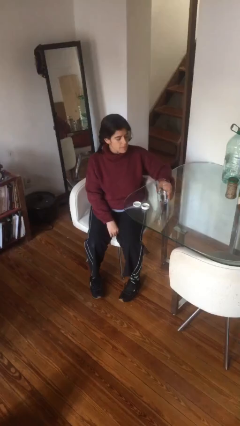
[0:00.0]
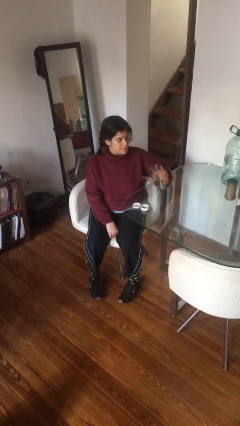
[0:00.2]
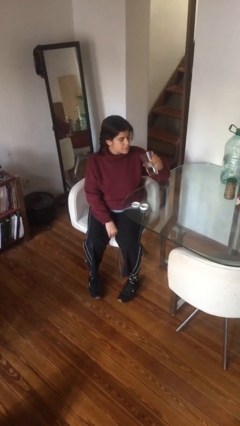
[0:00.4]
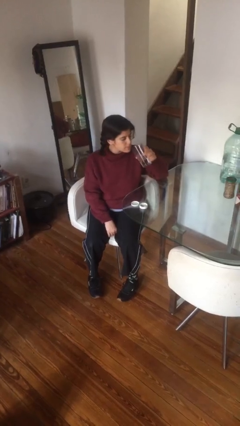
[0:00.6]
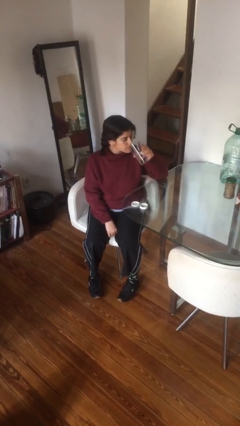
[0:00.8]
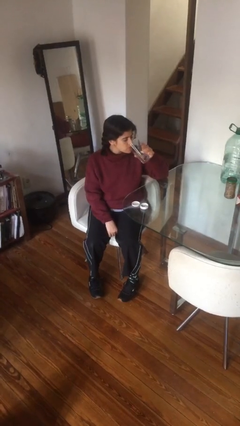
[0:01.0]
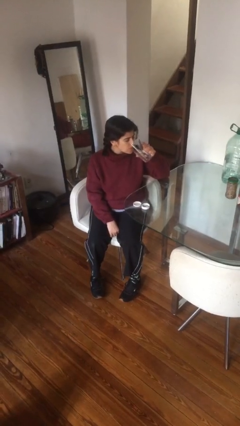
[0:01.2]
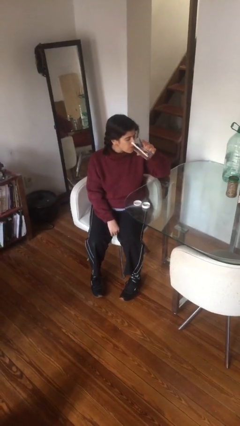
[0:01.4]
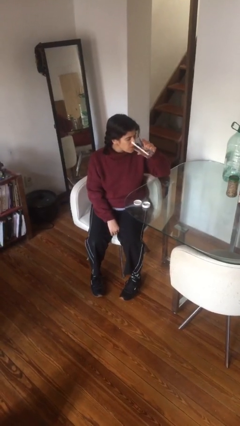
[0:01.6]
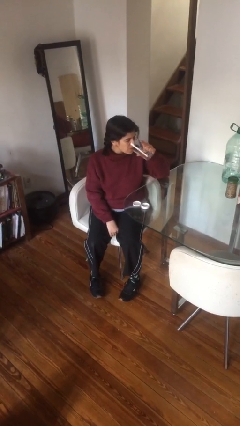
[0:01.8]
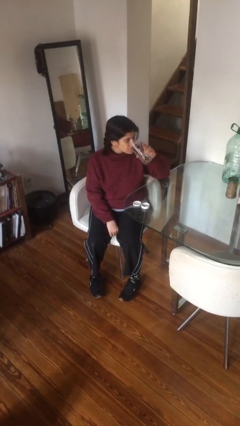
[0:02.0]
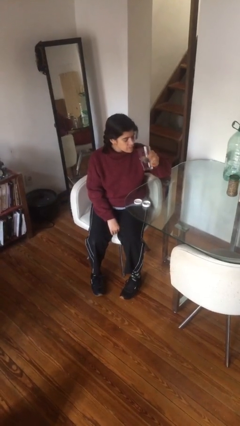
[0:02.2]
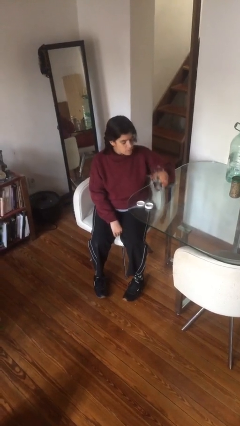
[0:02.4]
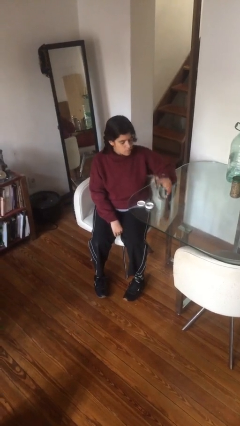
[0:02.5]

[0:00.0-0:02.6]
person drinks from cup

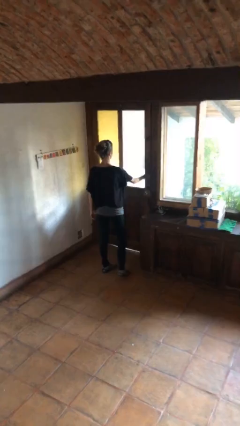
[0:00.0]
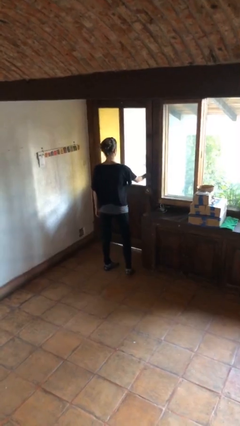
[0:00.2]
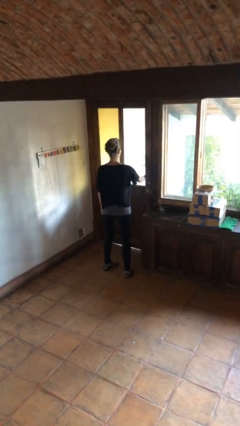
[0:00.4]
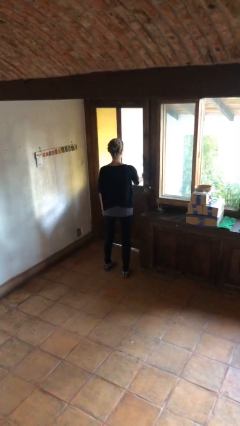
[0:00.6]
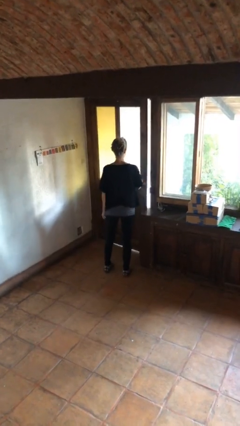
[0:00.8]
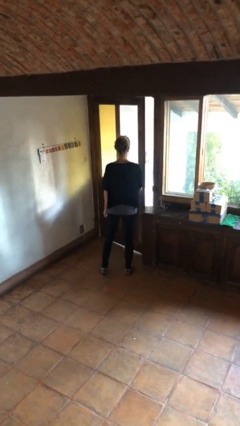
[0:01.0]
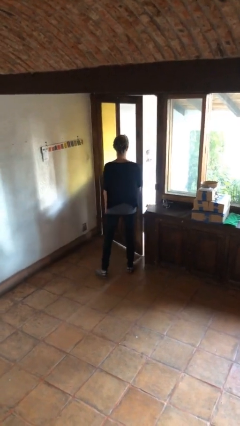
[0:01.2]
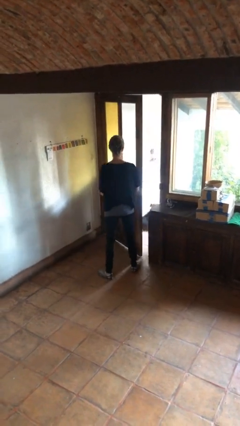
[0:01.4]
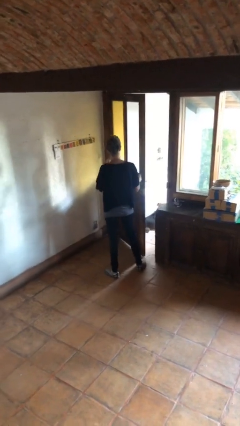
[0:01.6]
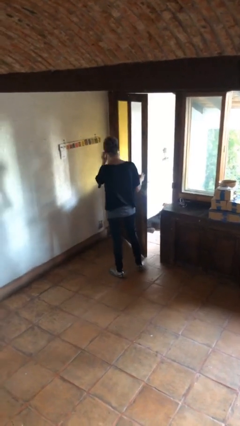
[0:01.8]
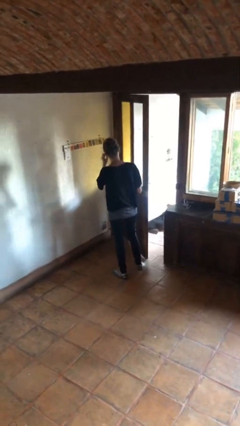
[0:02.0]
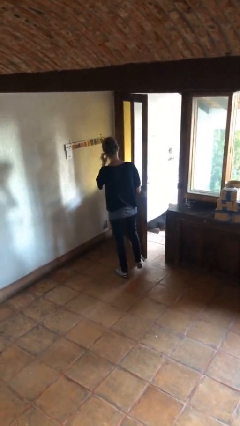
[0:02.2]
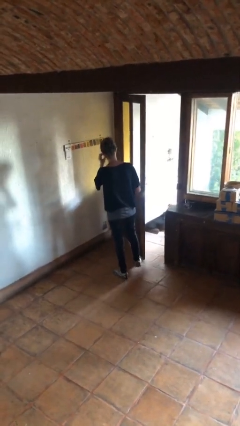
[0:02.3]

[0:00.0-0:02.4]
person opens facility door

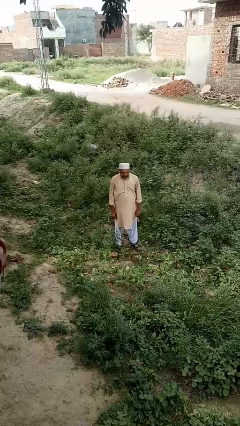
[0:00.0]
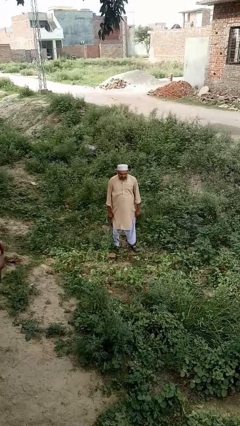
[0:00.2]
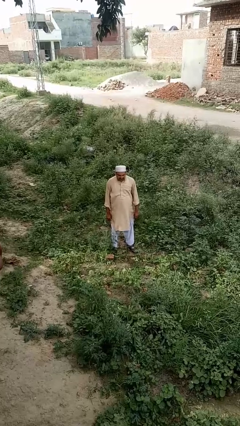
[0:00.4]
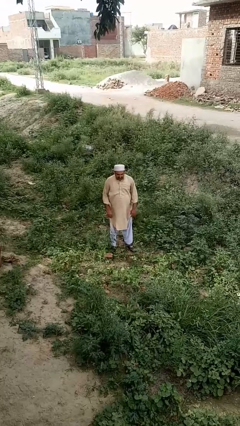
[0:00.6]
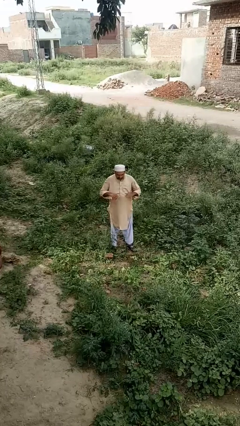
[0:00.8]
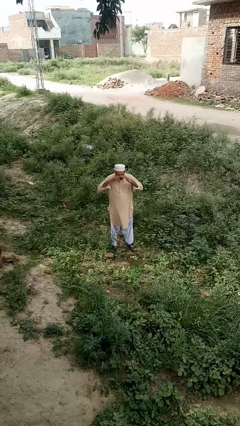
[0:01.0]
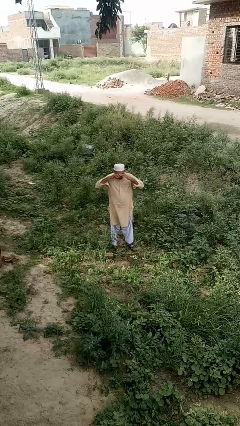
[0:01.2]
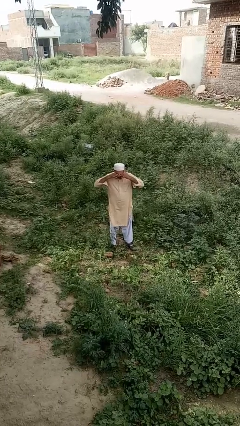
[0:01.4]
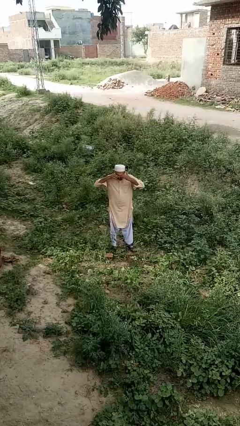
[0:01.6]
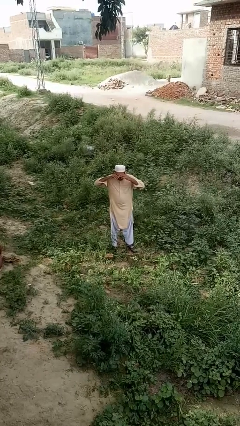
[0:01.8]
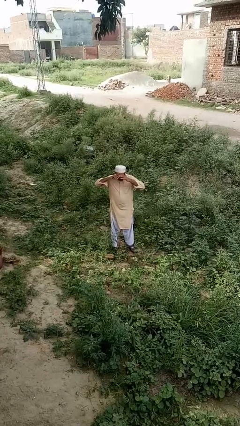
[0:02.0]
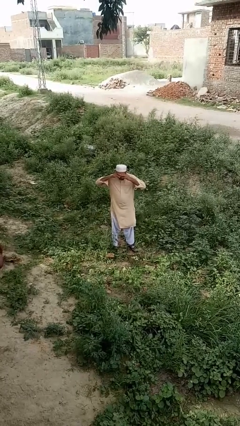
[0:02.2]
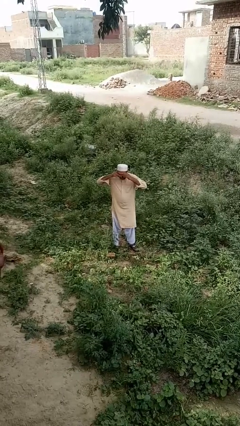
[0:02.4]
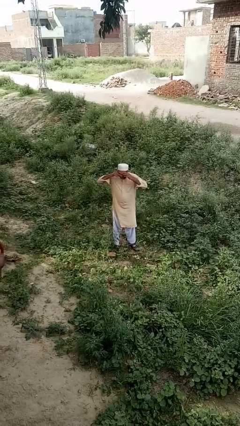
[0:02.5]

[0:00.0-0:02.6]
person rubs eyes

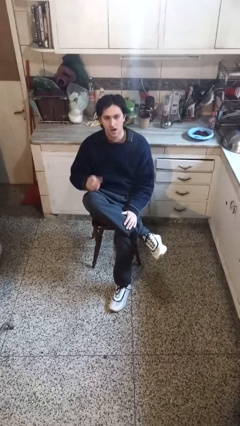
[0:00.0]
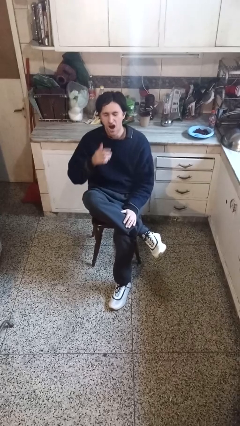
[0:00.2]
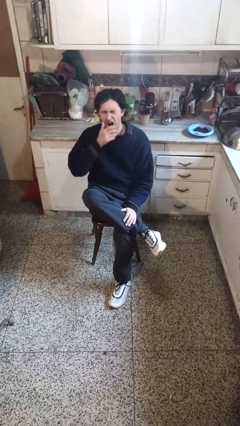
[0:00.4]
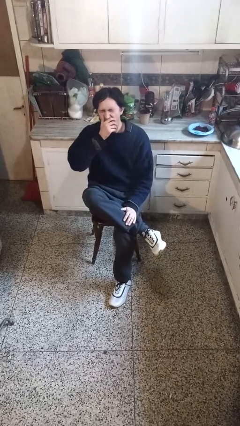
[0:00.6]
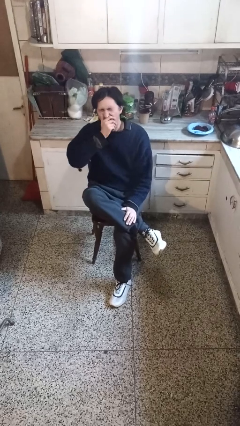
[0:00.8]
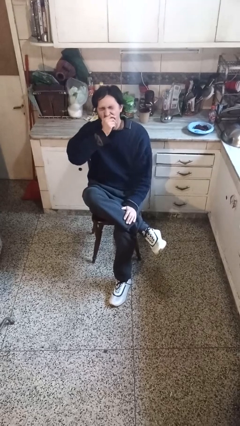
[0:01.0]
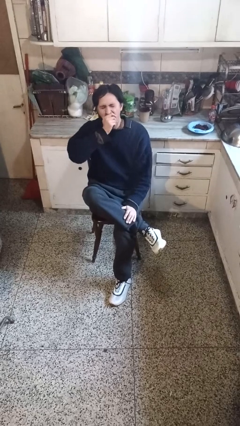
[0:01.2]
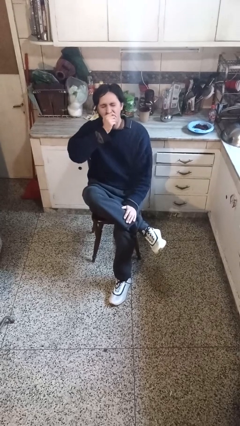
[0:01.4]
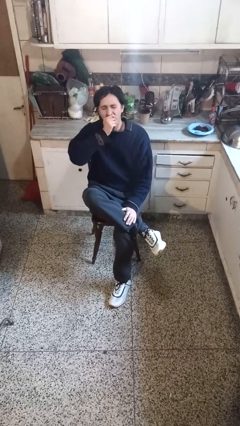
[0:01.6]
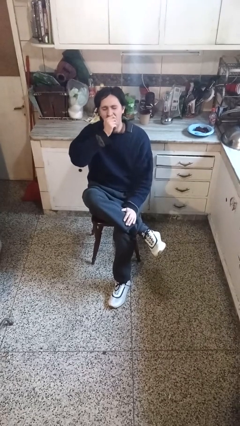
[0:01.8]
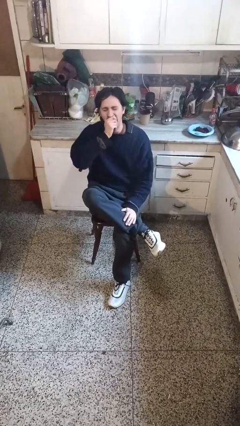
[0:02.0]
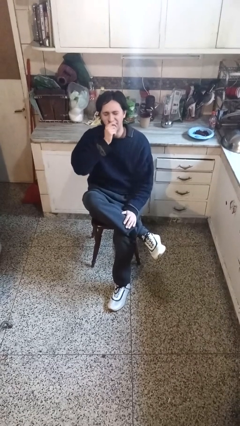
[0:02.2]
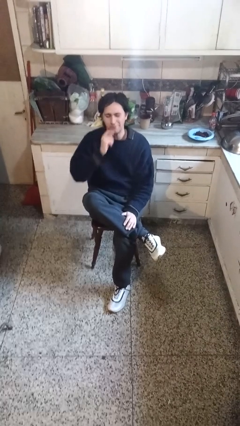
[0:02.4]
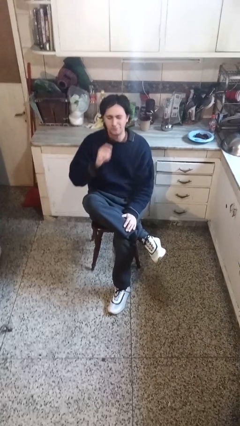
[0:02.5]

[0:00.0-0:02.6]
person yawns

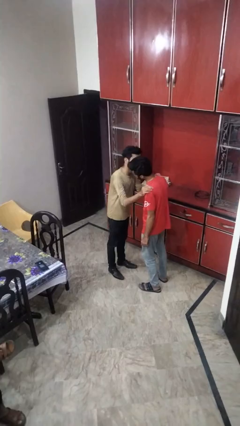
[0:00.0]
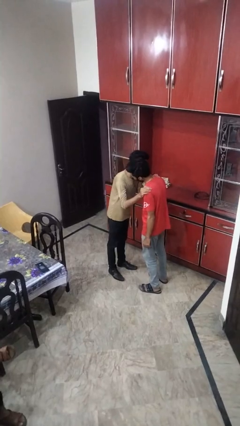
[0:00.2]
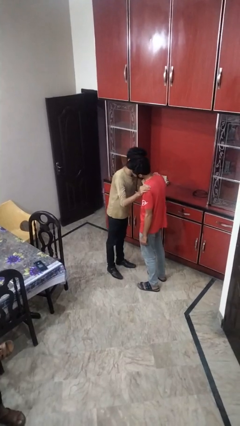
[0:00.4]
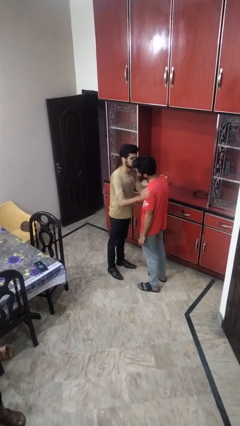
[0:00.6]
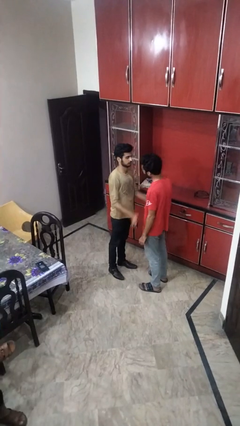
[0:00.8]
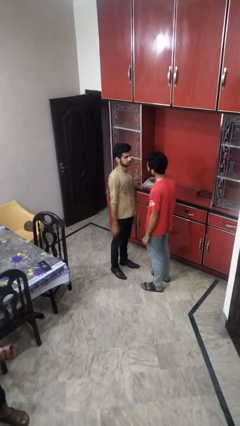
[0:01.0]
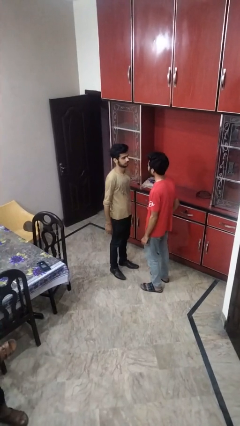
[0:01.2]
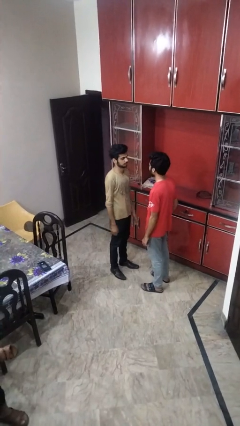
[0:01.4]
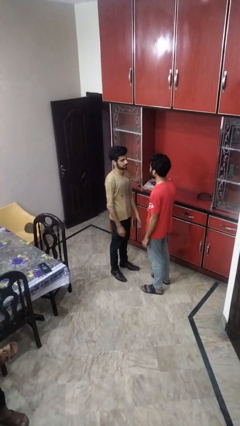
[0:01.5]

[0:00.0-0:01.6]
person shoves person

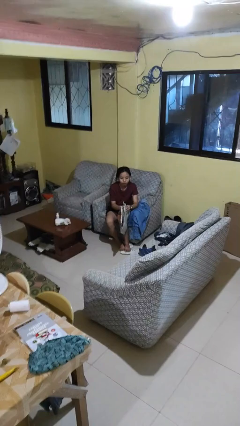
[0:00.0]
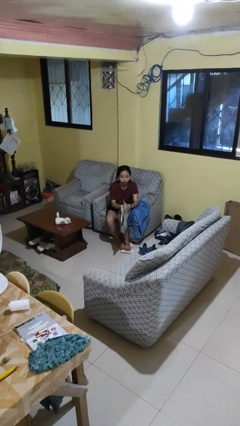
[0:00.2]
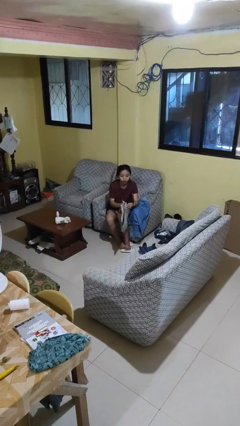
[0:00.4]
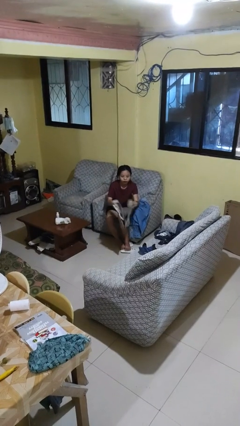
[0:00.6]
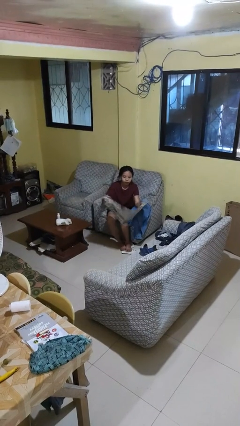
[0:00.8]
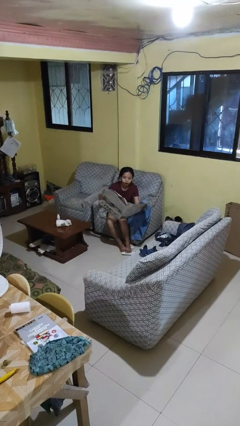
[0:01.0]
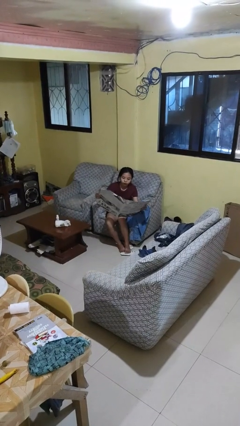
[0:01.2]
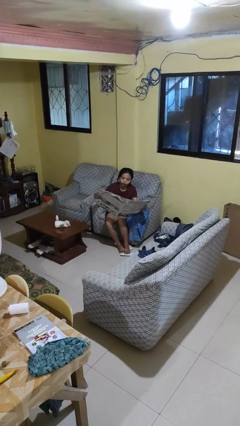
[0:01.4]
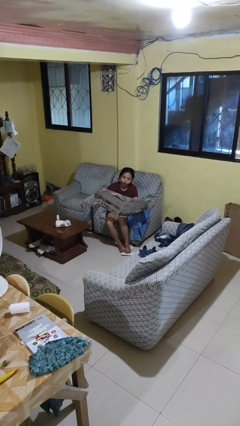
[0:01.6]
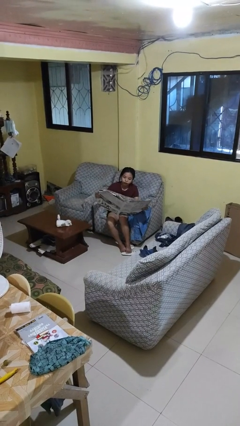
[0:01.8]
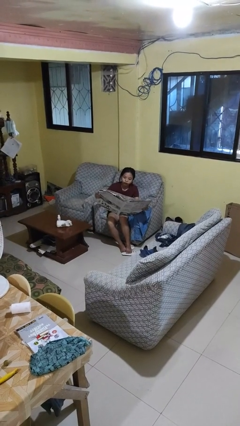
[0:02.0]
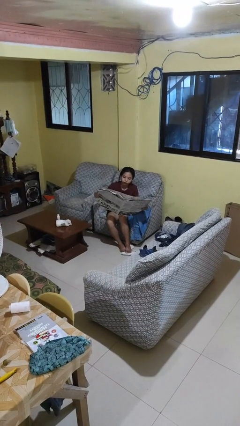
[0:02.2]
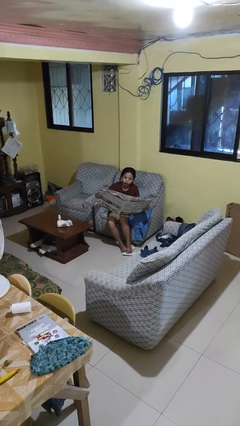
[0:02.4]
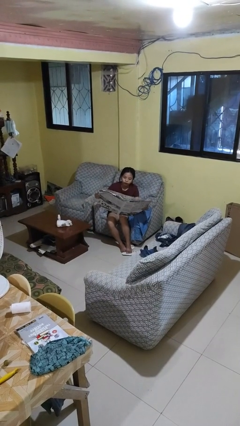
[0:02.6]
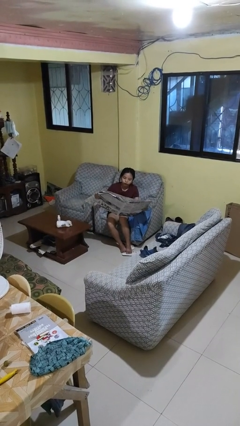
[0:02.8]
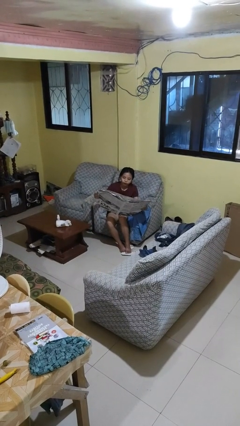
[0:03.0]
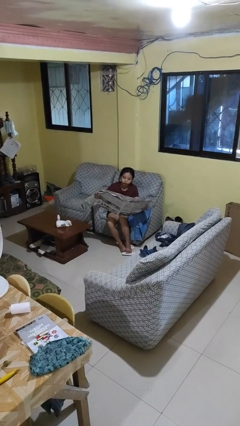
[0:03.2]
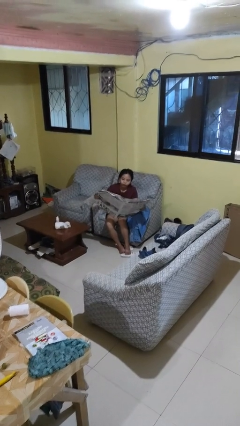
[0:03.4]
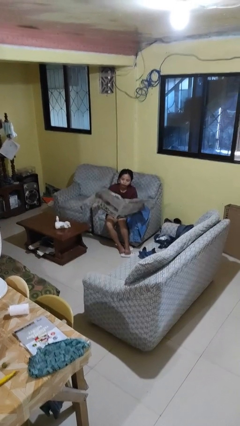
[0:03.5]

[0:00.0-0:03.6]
person reads newspaper

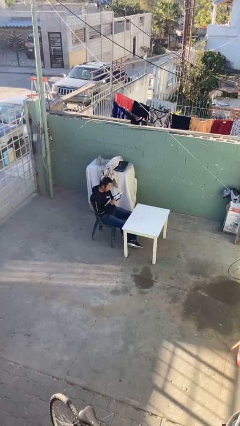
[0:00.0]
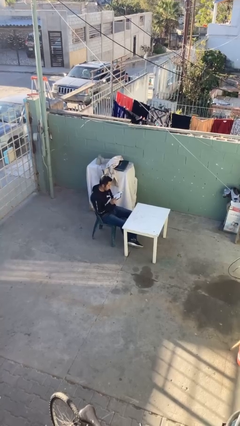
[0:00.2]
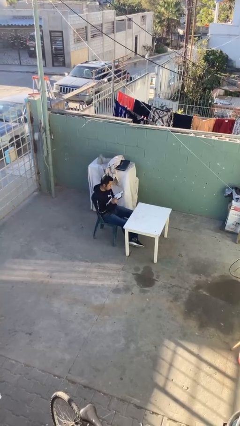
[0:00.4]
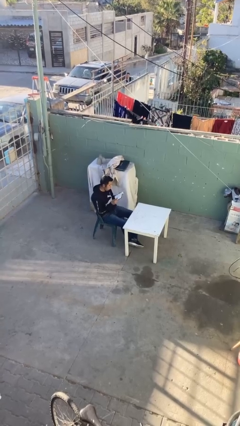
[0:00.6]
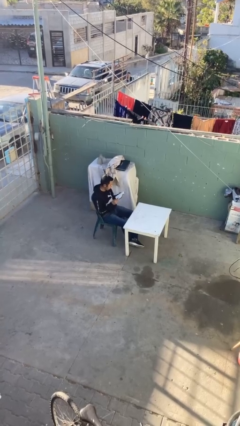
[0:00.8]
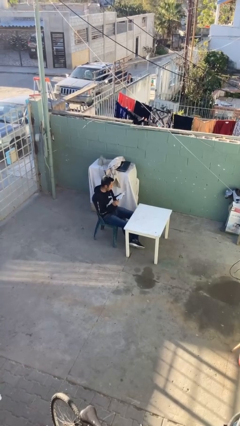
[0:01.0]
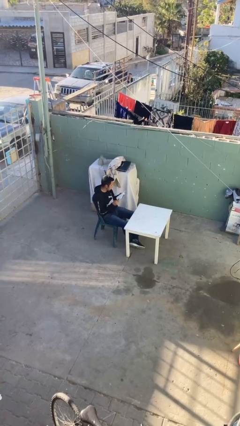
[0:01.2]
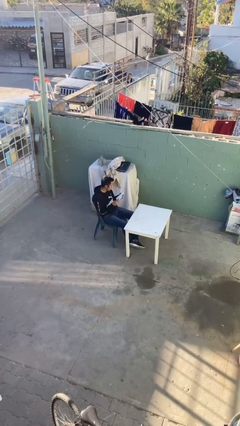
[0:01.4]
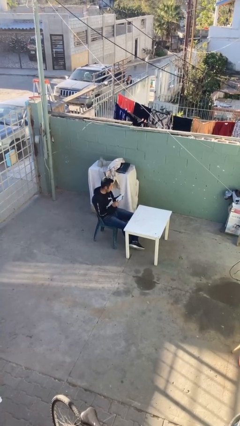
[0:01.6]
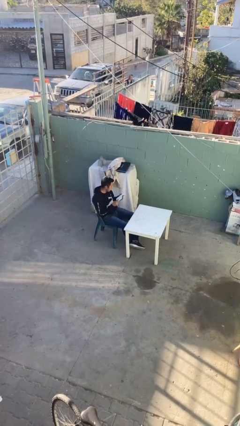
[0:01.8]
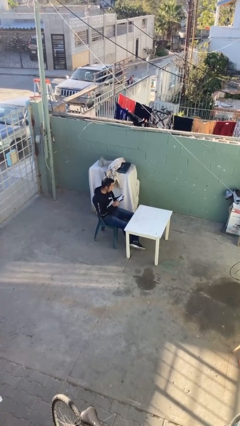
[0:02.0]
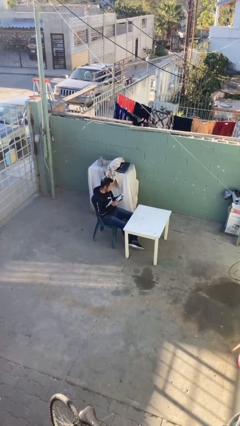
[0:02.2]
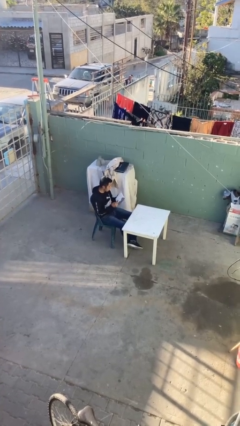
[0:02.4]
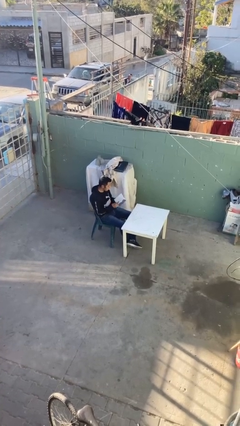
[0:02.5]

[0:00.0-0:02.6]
person reads document
